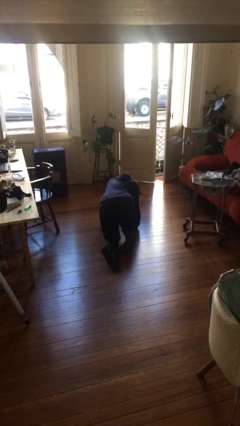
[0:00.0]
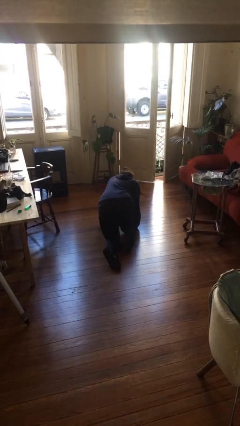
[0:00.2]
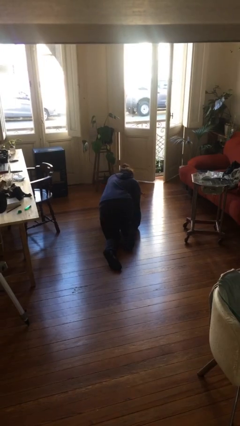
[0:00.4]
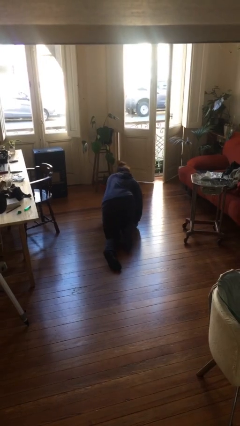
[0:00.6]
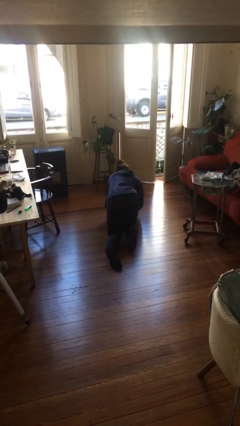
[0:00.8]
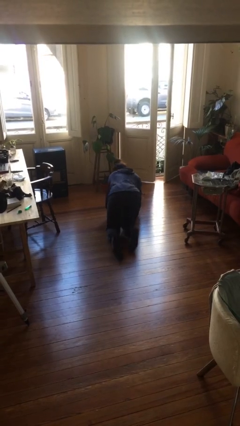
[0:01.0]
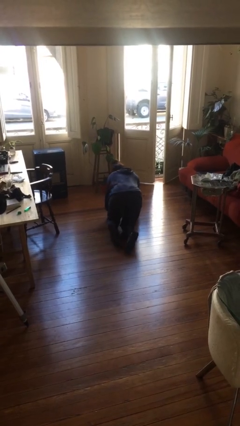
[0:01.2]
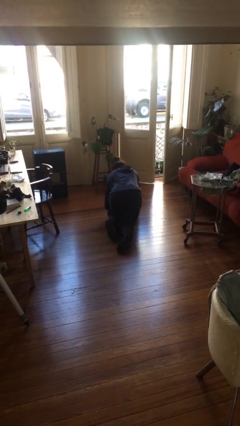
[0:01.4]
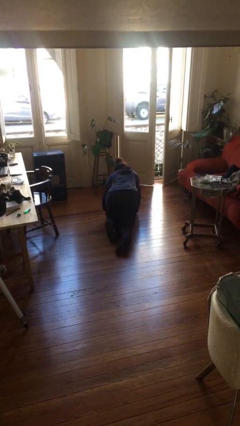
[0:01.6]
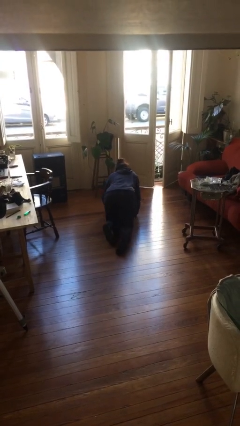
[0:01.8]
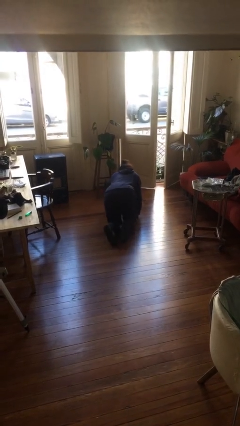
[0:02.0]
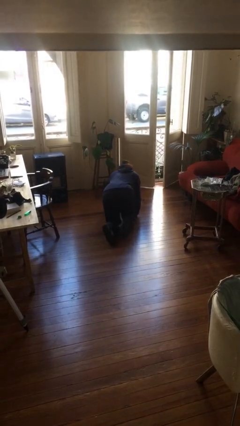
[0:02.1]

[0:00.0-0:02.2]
person crawls

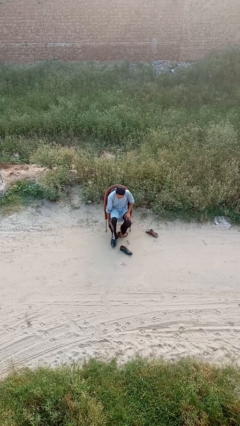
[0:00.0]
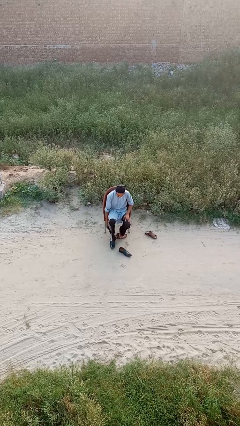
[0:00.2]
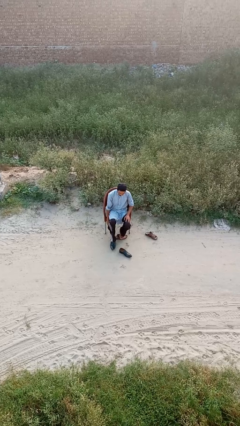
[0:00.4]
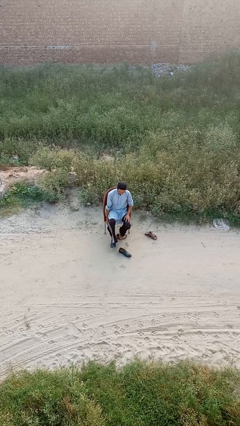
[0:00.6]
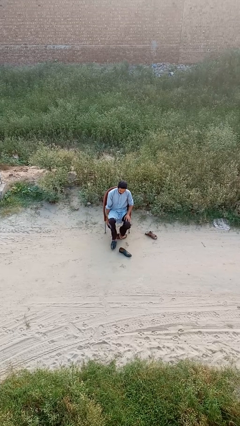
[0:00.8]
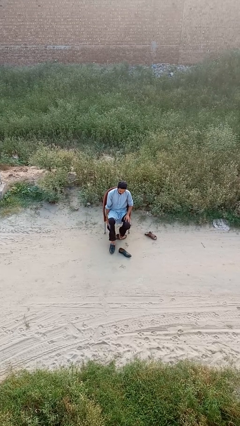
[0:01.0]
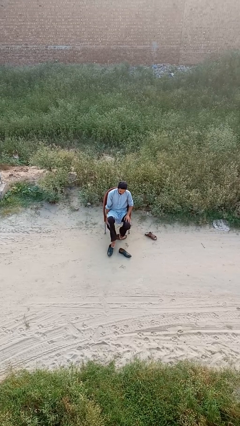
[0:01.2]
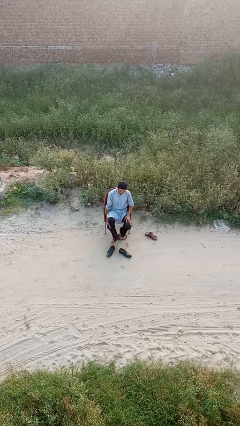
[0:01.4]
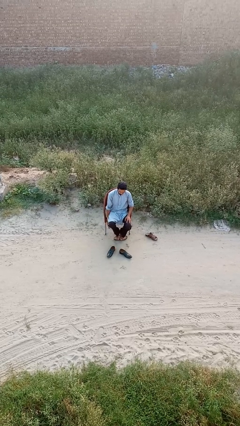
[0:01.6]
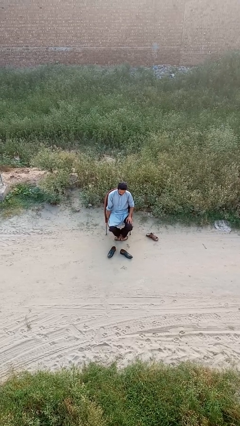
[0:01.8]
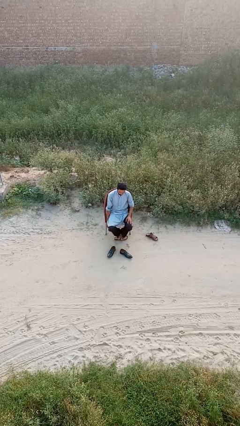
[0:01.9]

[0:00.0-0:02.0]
person takes off shoes

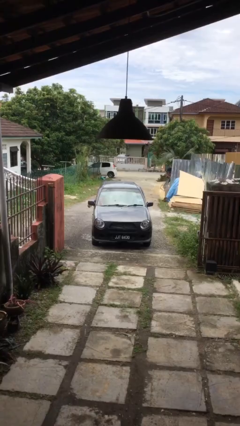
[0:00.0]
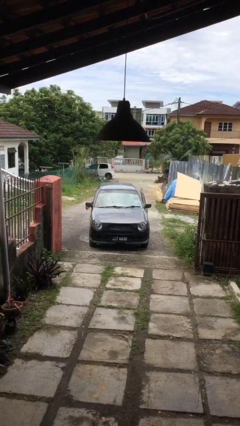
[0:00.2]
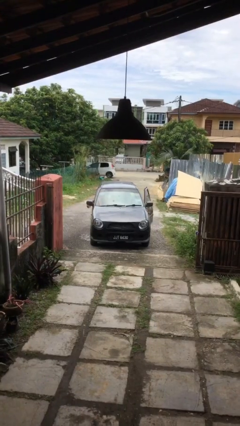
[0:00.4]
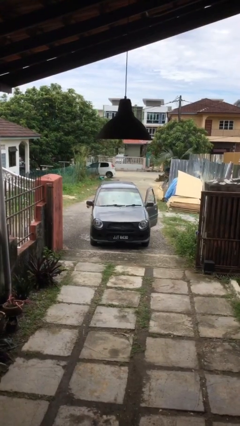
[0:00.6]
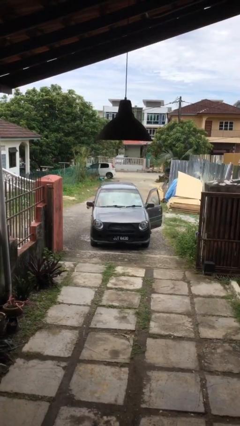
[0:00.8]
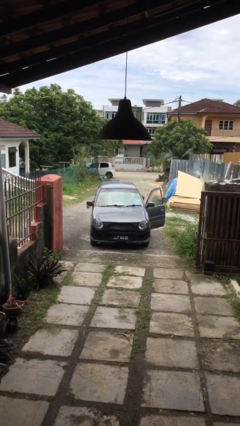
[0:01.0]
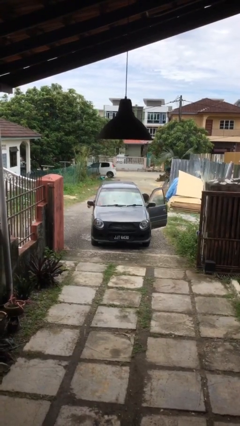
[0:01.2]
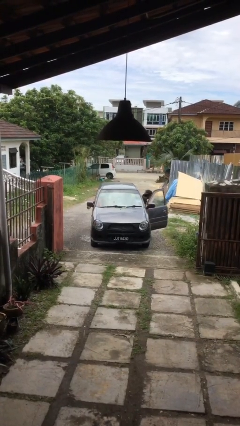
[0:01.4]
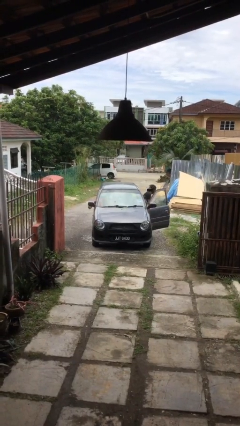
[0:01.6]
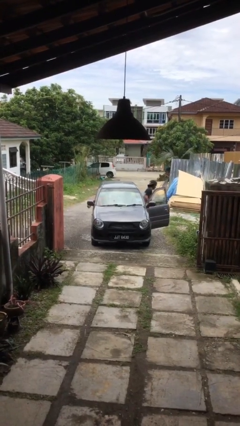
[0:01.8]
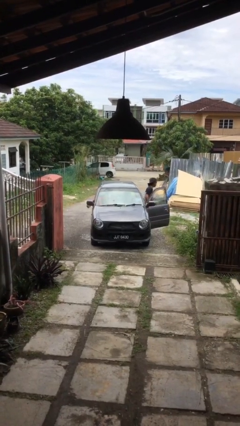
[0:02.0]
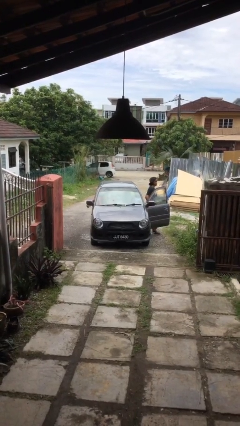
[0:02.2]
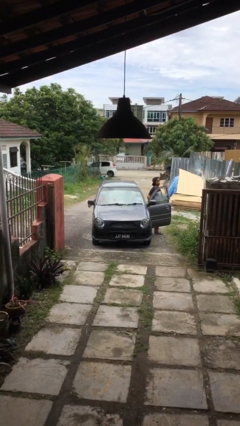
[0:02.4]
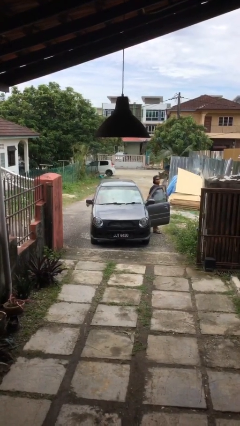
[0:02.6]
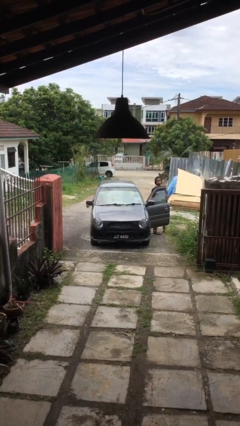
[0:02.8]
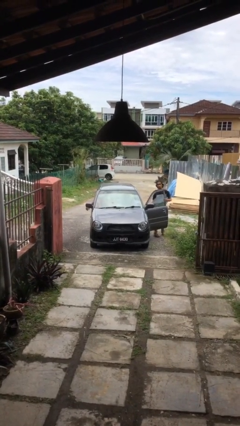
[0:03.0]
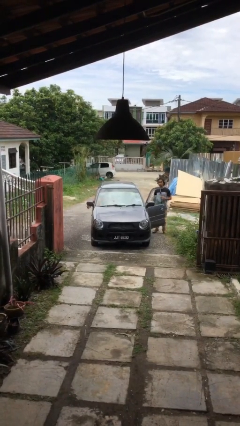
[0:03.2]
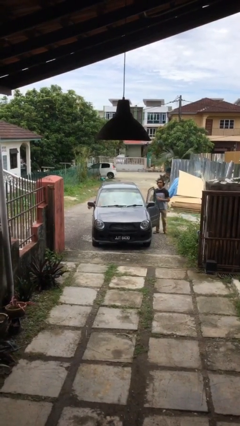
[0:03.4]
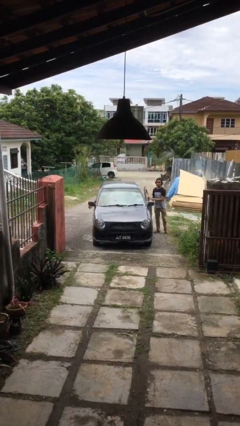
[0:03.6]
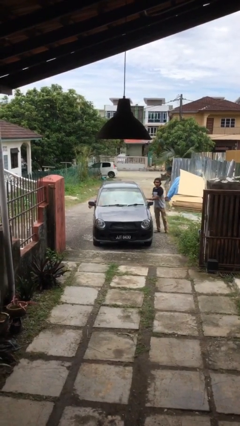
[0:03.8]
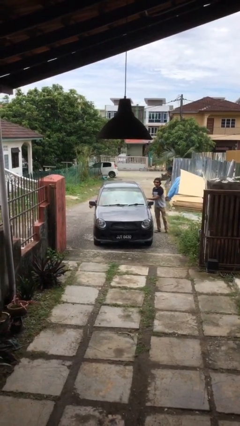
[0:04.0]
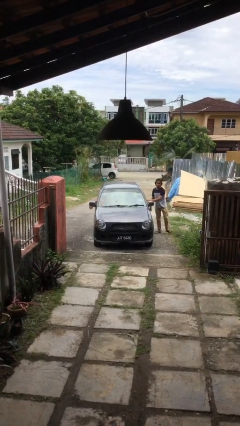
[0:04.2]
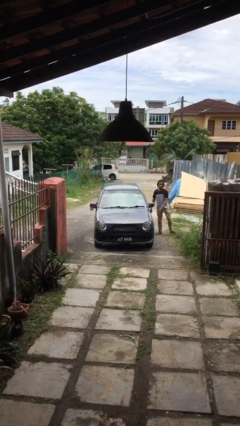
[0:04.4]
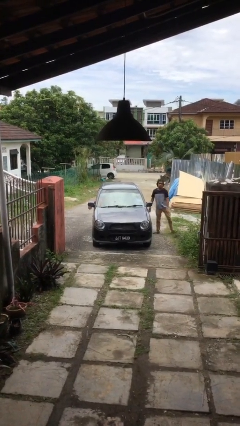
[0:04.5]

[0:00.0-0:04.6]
car drops off person

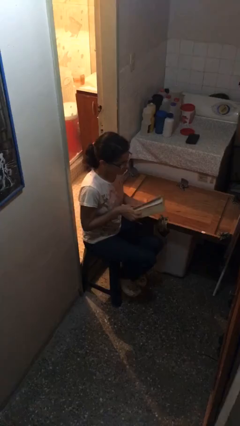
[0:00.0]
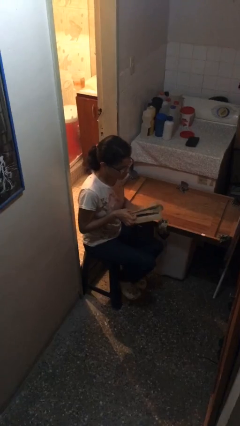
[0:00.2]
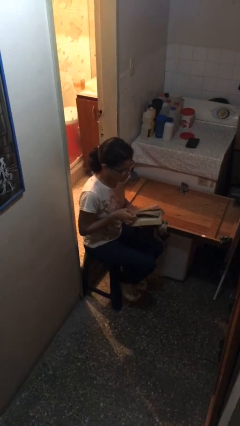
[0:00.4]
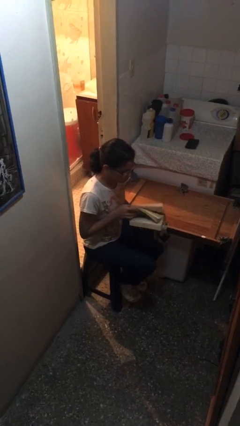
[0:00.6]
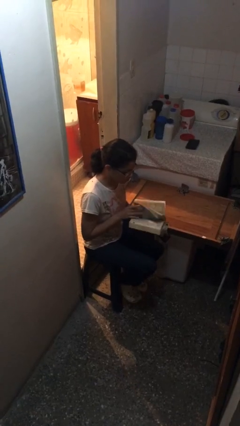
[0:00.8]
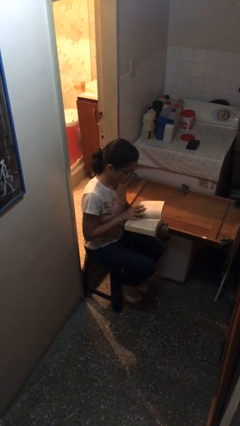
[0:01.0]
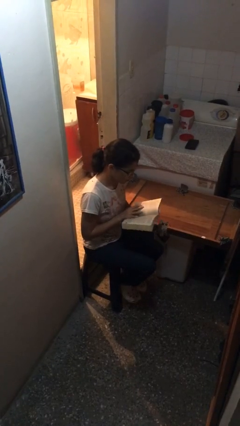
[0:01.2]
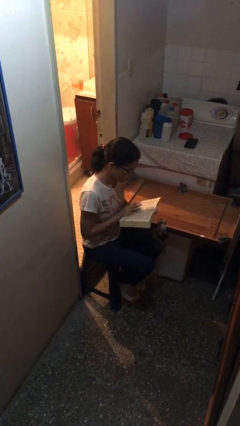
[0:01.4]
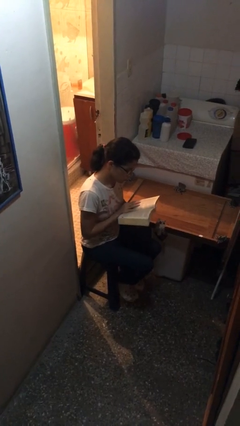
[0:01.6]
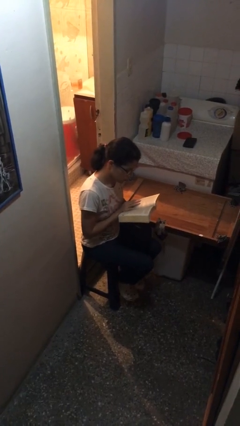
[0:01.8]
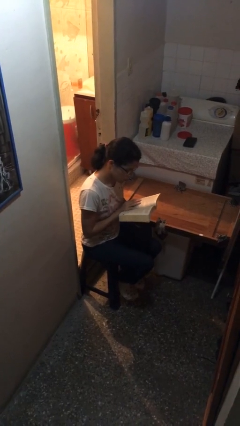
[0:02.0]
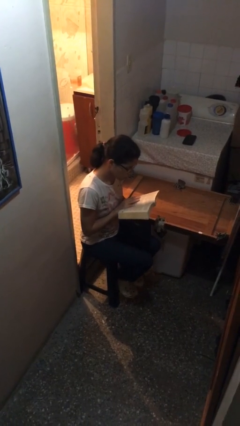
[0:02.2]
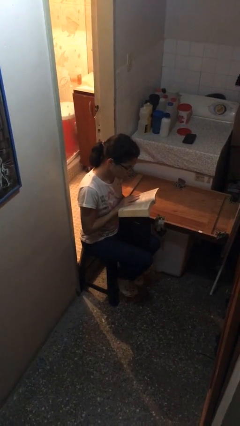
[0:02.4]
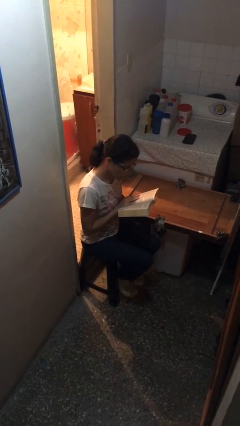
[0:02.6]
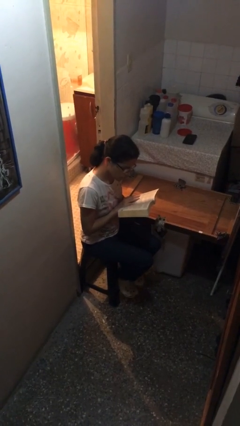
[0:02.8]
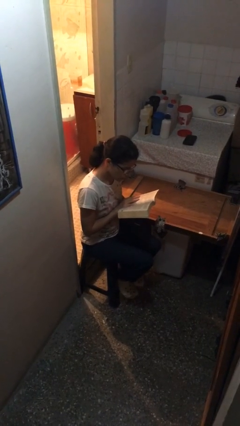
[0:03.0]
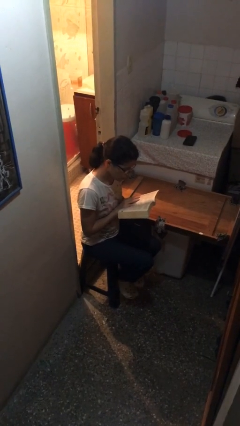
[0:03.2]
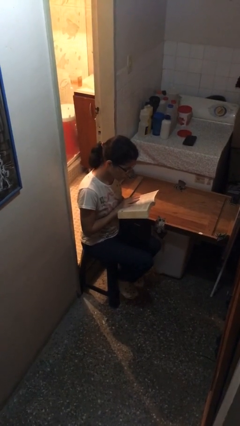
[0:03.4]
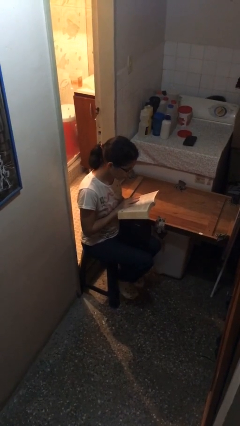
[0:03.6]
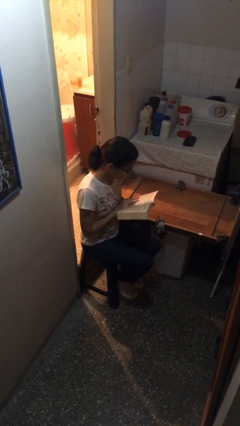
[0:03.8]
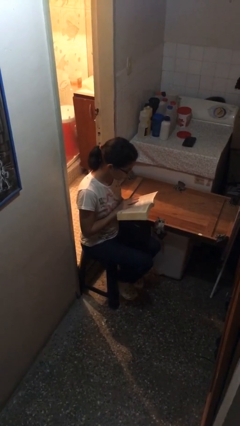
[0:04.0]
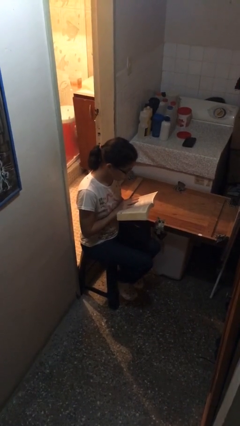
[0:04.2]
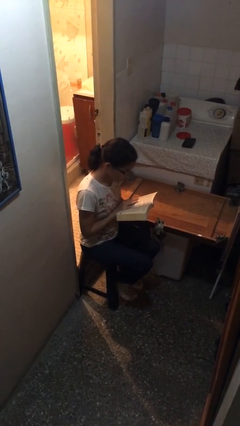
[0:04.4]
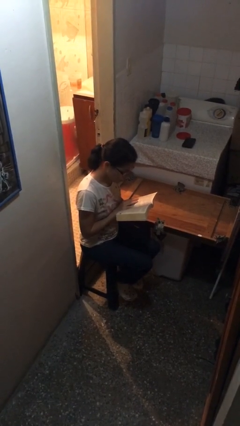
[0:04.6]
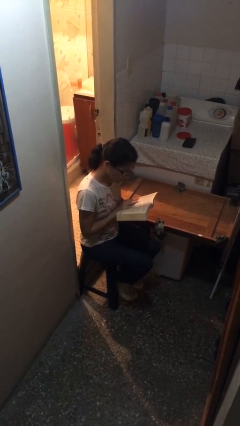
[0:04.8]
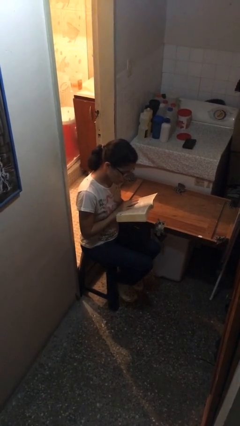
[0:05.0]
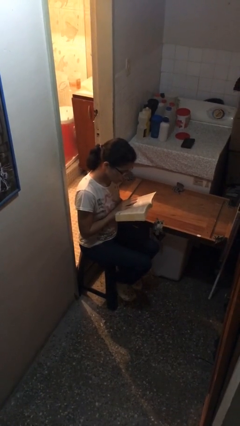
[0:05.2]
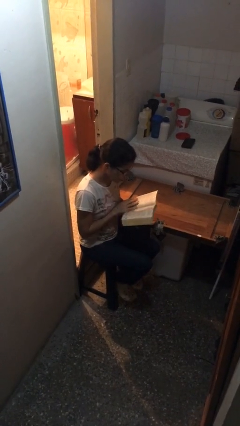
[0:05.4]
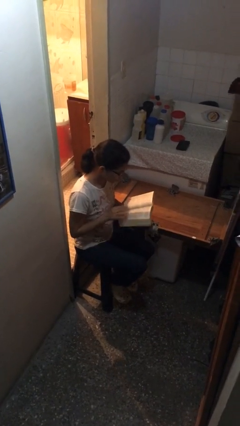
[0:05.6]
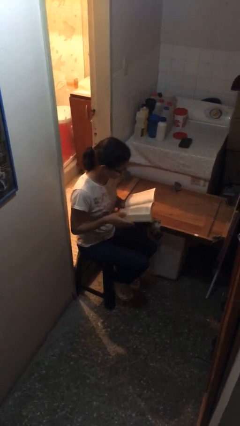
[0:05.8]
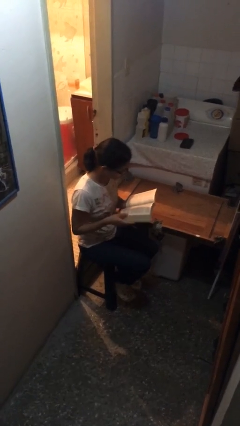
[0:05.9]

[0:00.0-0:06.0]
person reads document

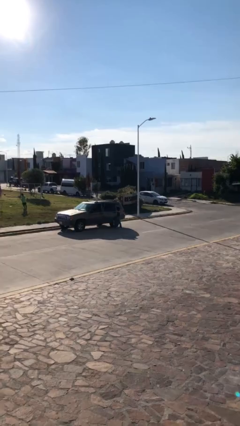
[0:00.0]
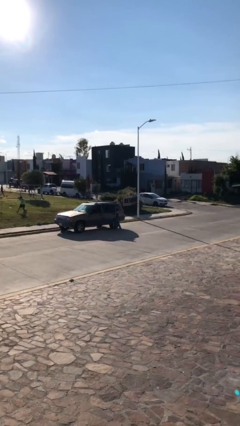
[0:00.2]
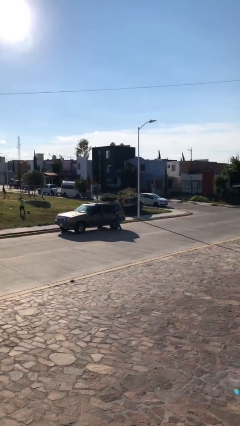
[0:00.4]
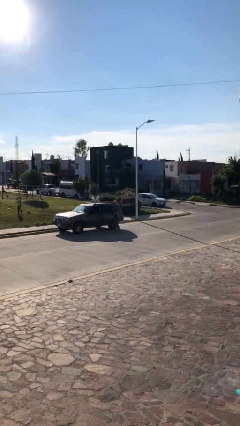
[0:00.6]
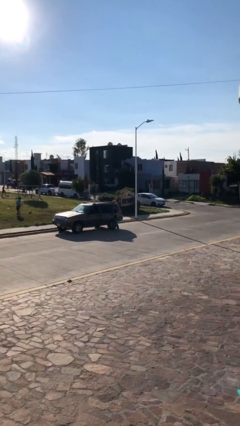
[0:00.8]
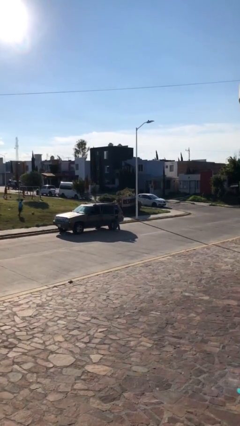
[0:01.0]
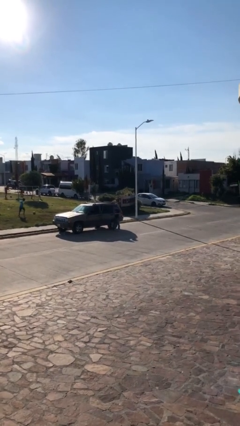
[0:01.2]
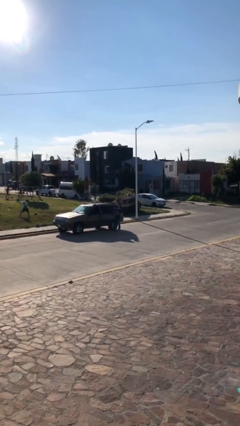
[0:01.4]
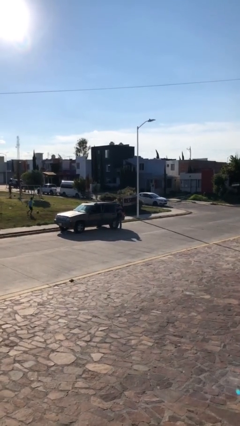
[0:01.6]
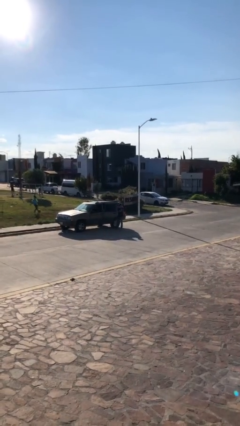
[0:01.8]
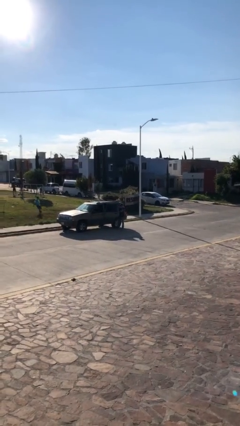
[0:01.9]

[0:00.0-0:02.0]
person unloads car

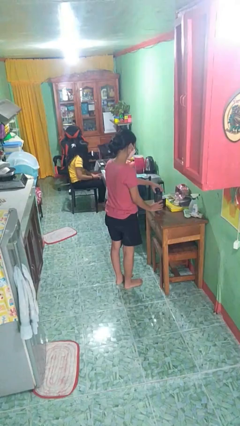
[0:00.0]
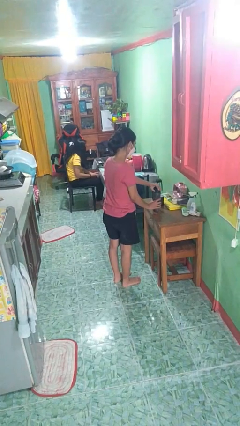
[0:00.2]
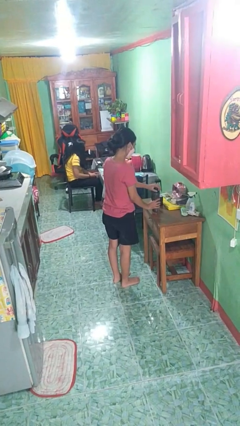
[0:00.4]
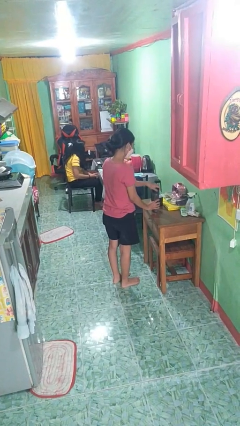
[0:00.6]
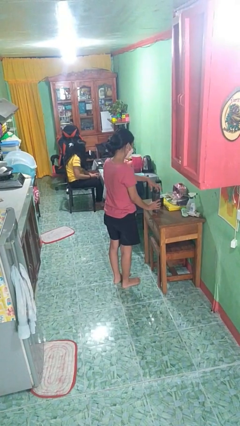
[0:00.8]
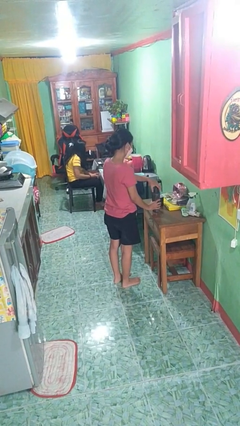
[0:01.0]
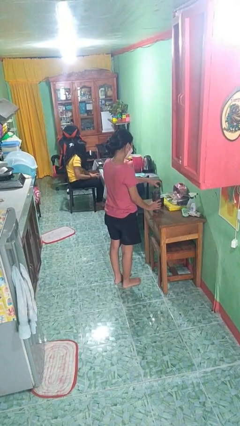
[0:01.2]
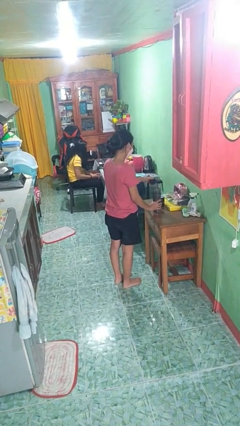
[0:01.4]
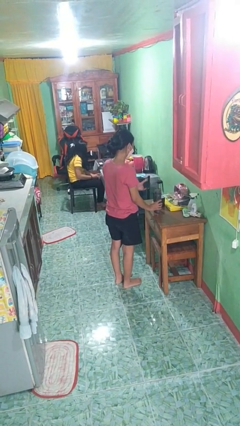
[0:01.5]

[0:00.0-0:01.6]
person unscrews lid from bottle
